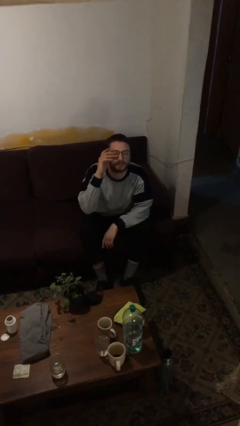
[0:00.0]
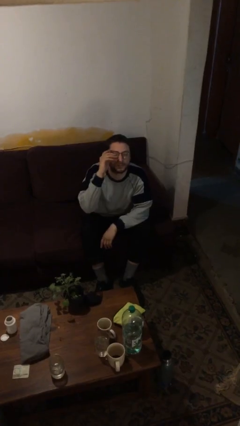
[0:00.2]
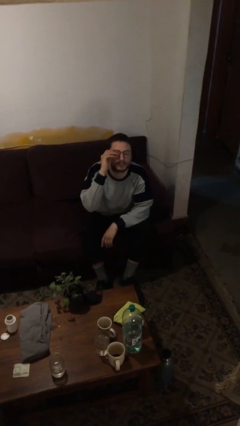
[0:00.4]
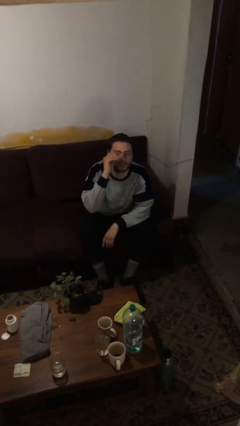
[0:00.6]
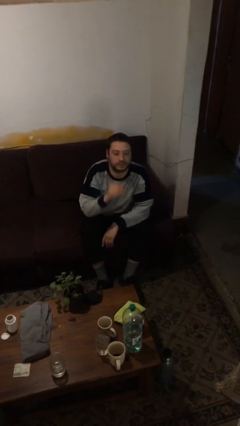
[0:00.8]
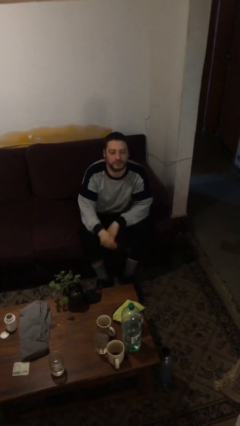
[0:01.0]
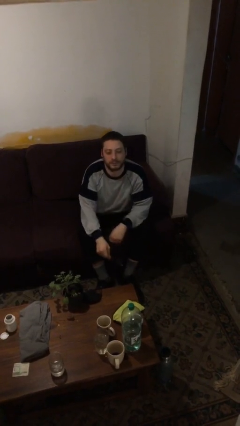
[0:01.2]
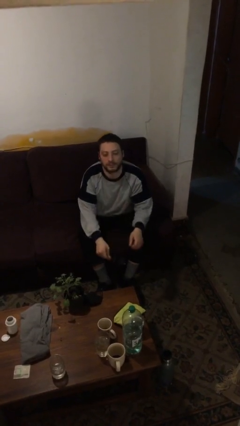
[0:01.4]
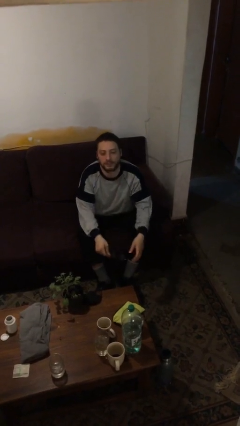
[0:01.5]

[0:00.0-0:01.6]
person takes off glasses

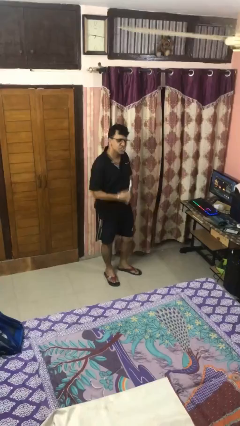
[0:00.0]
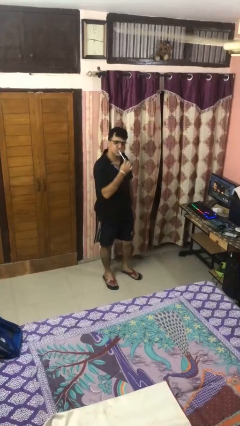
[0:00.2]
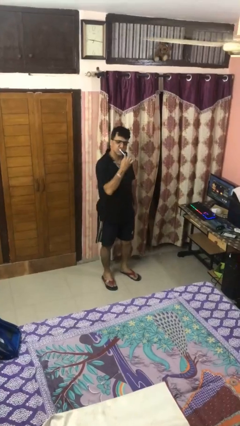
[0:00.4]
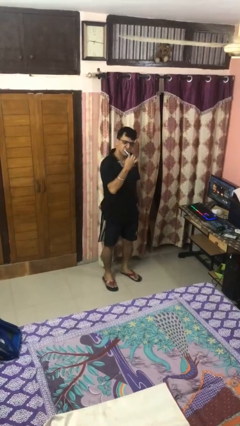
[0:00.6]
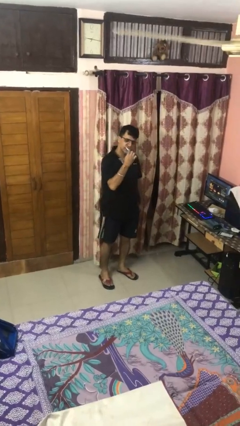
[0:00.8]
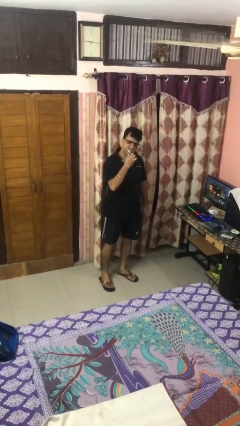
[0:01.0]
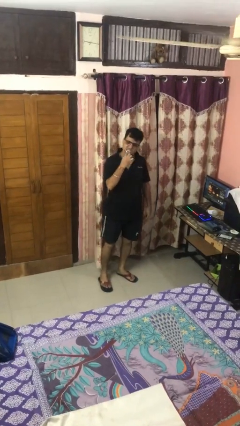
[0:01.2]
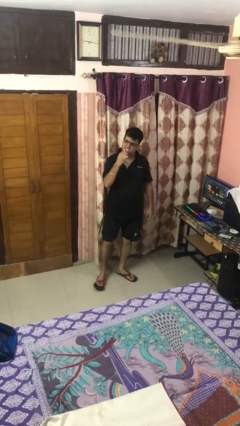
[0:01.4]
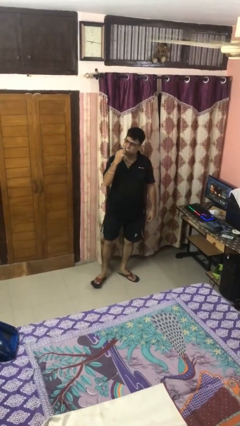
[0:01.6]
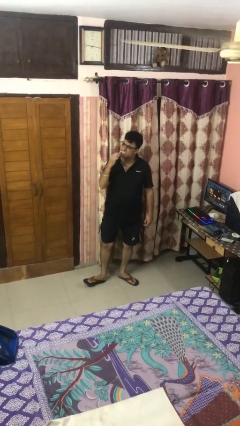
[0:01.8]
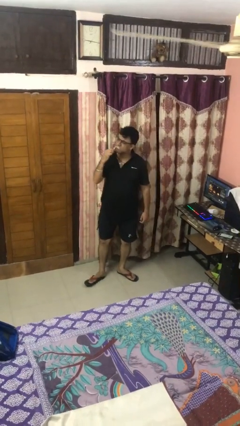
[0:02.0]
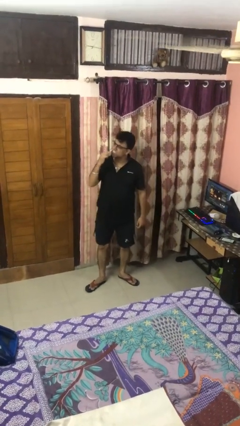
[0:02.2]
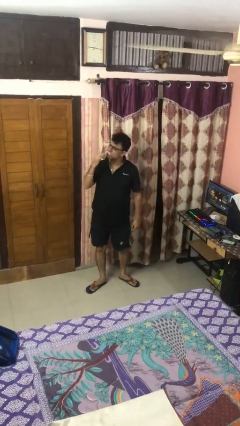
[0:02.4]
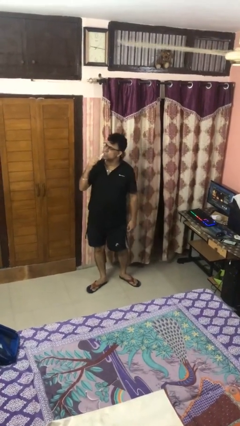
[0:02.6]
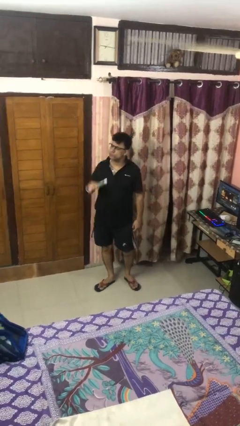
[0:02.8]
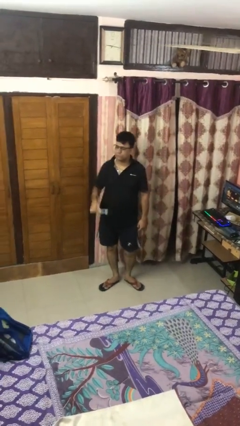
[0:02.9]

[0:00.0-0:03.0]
person brushes teeth

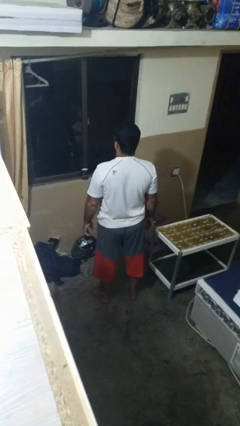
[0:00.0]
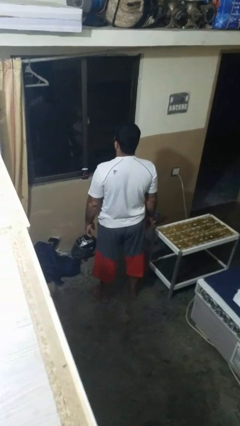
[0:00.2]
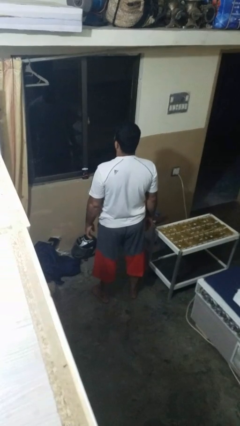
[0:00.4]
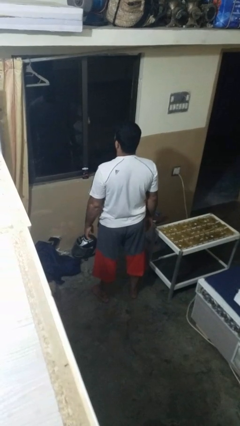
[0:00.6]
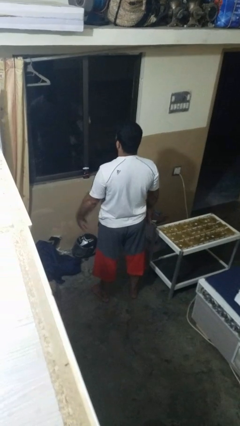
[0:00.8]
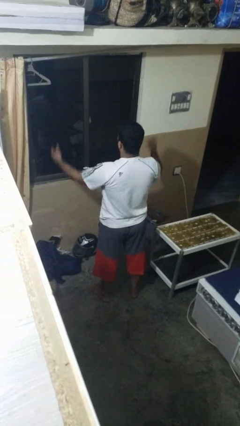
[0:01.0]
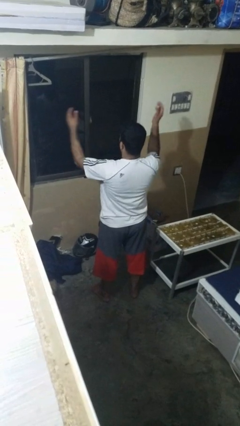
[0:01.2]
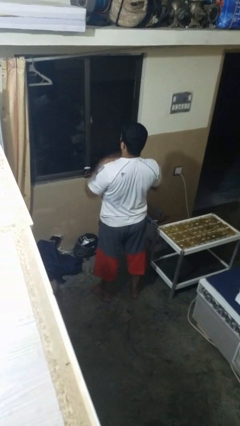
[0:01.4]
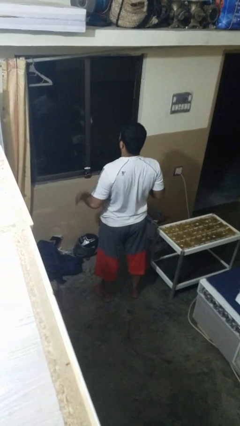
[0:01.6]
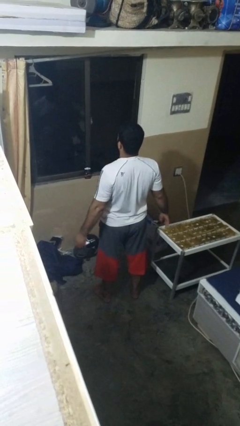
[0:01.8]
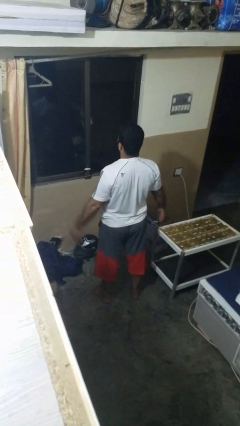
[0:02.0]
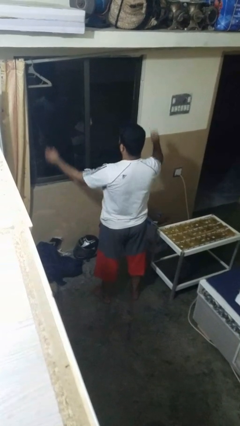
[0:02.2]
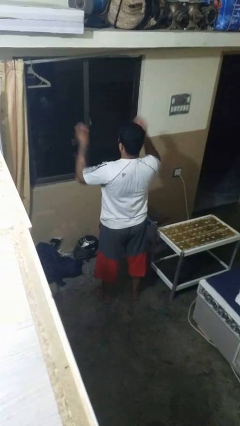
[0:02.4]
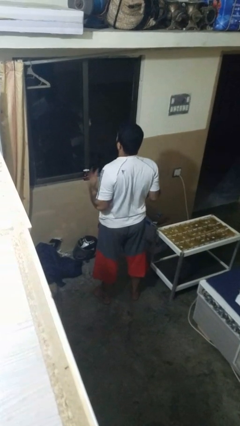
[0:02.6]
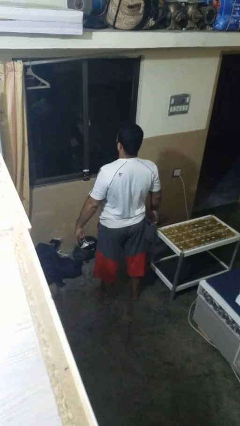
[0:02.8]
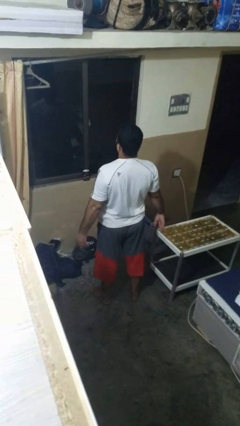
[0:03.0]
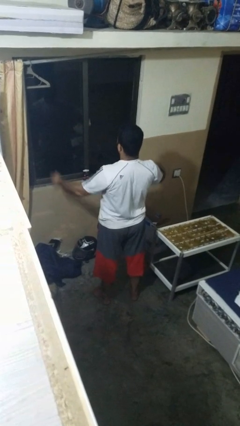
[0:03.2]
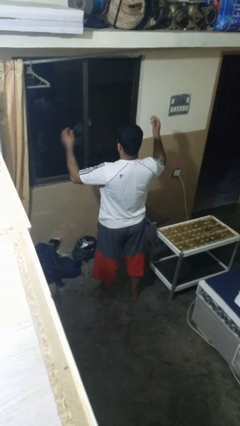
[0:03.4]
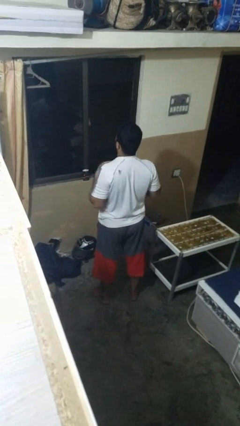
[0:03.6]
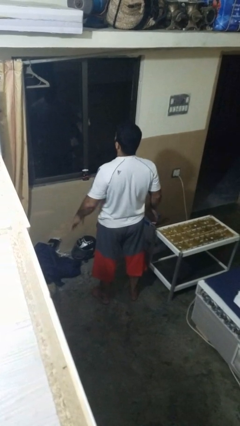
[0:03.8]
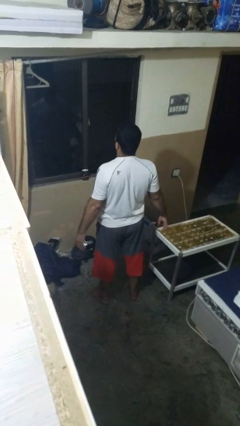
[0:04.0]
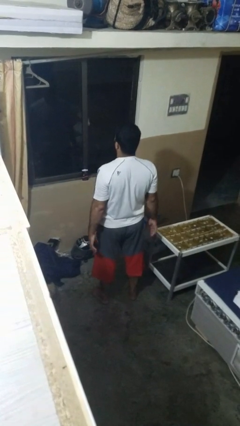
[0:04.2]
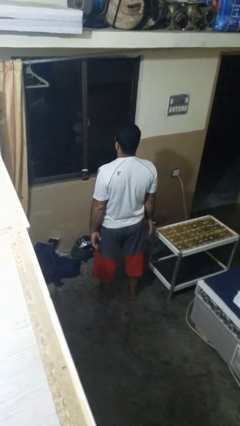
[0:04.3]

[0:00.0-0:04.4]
person drums on chest

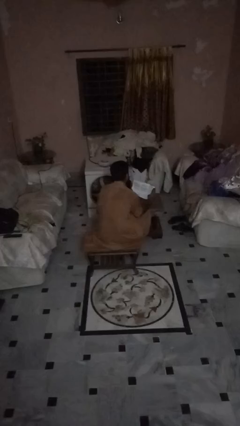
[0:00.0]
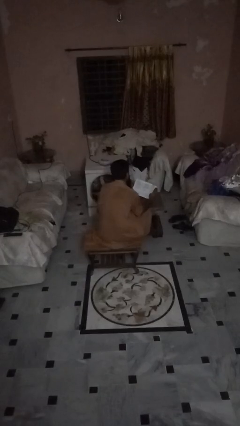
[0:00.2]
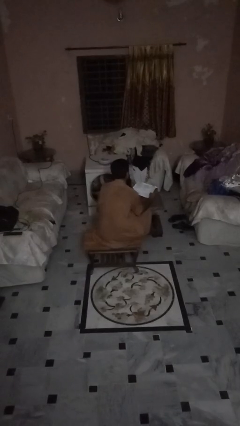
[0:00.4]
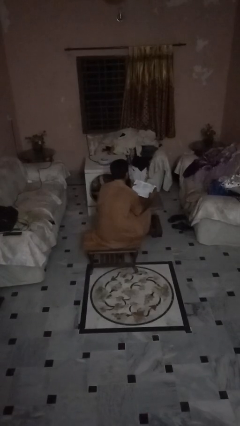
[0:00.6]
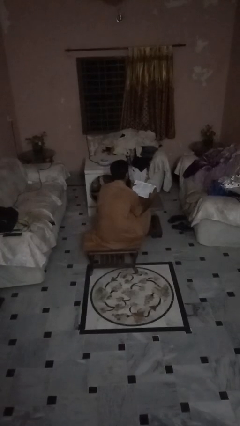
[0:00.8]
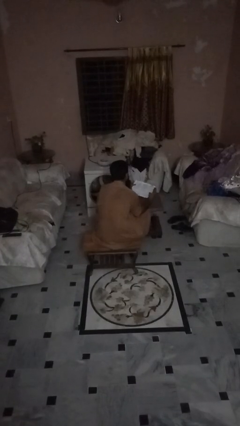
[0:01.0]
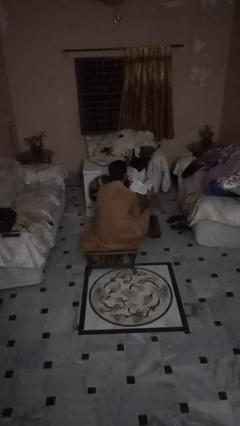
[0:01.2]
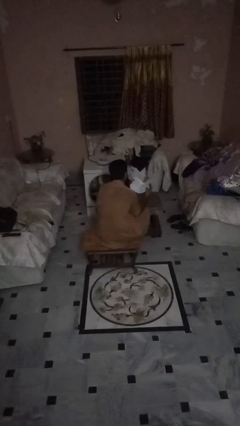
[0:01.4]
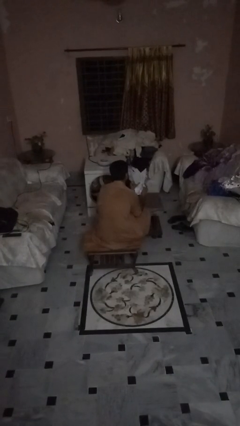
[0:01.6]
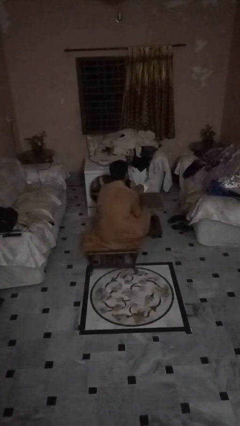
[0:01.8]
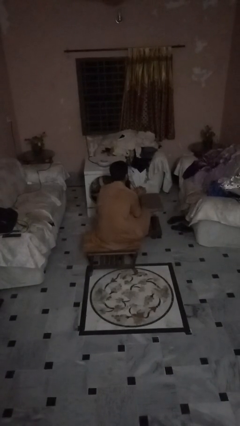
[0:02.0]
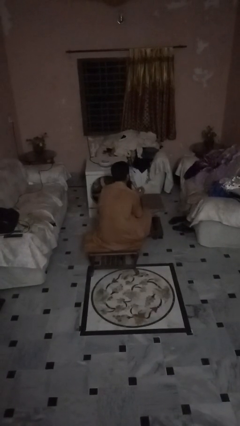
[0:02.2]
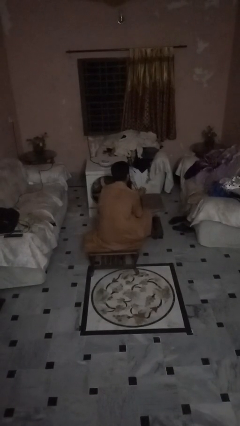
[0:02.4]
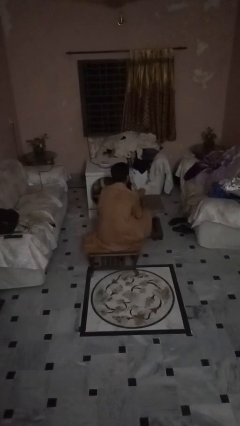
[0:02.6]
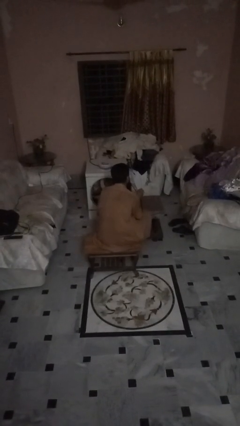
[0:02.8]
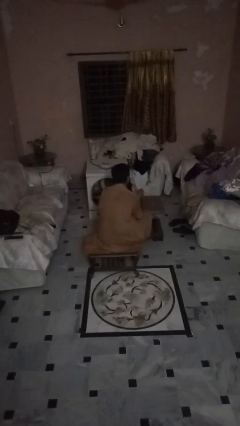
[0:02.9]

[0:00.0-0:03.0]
person crumples paper

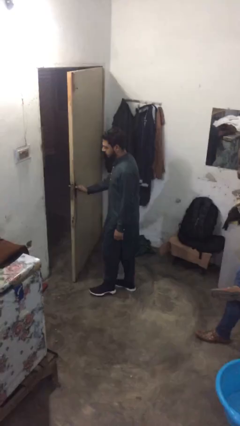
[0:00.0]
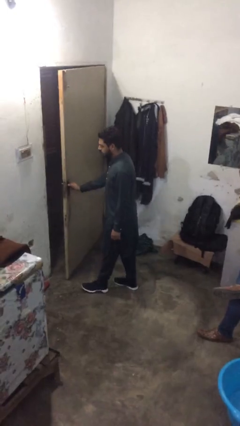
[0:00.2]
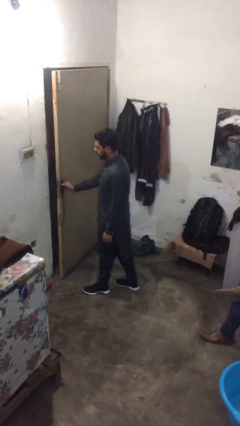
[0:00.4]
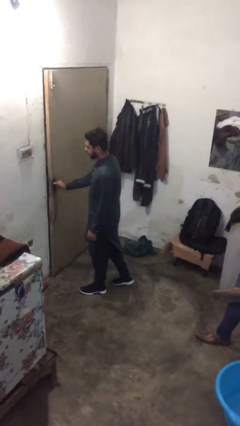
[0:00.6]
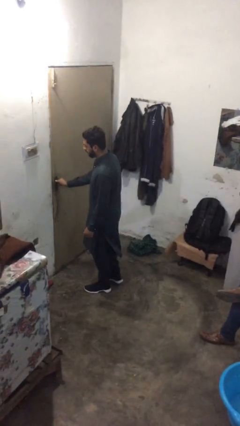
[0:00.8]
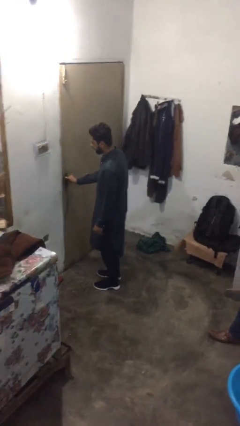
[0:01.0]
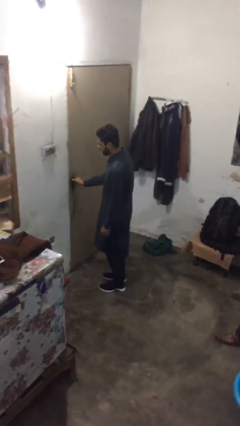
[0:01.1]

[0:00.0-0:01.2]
person closes facility door

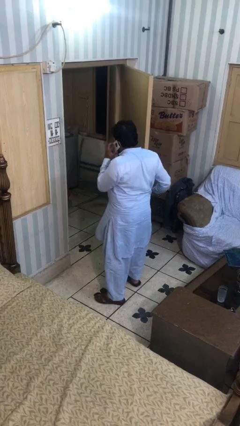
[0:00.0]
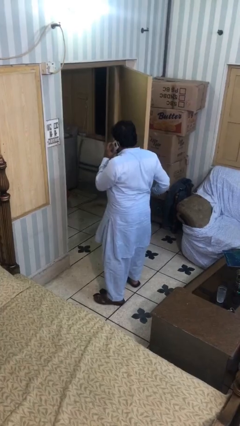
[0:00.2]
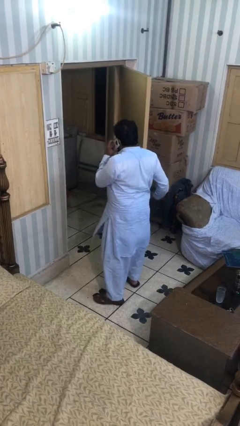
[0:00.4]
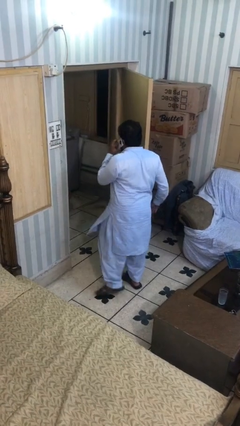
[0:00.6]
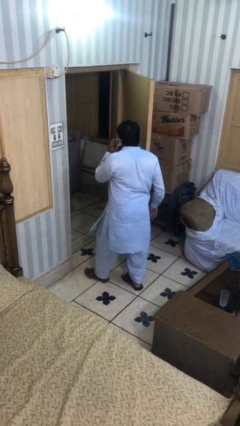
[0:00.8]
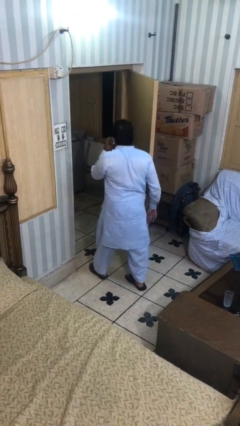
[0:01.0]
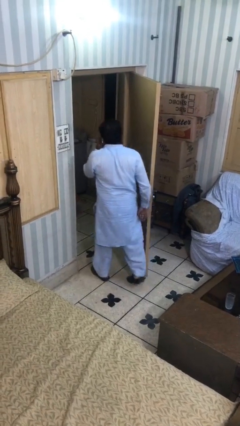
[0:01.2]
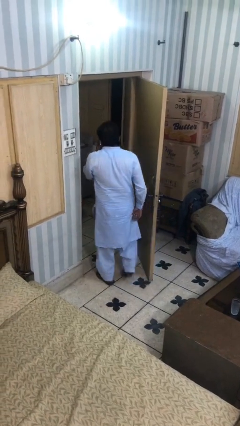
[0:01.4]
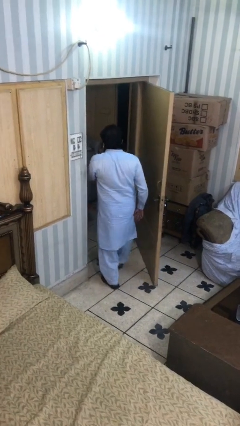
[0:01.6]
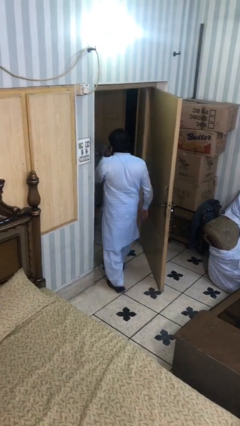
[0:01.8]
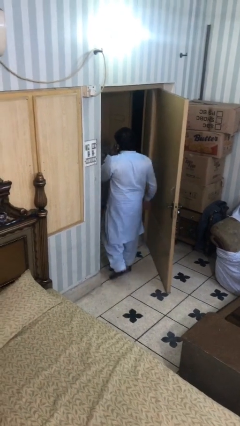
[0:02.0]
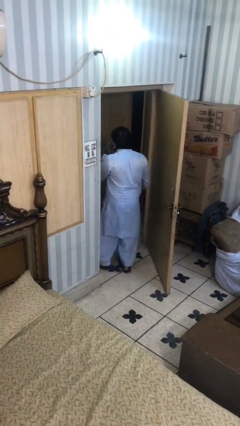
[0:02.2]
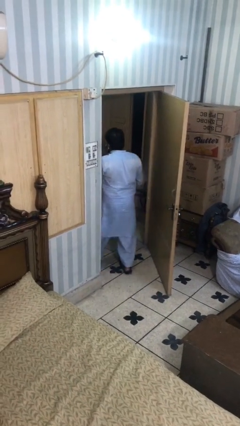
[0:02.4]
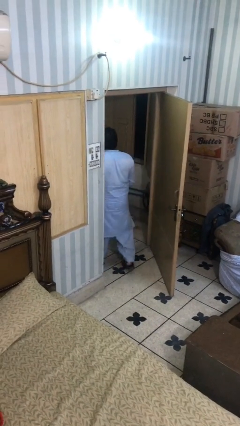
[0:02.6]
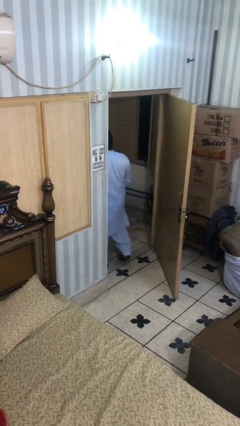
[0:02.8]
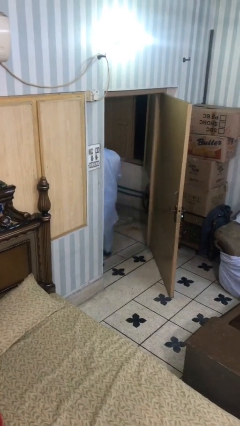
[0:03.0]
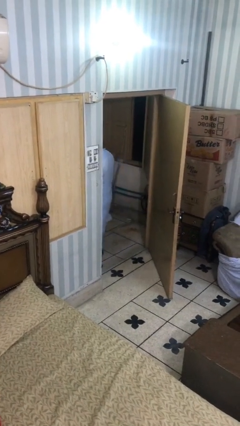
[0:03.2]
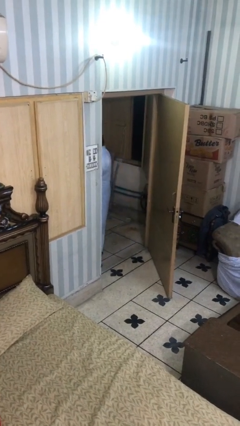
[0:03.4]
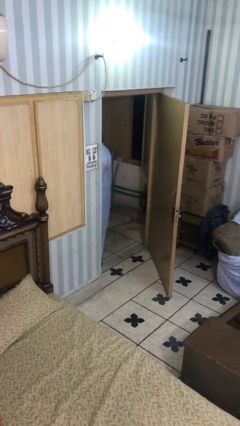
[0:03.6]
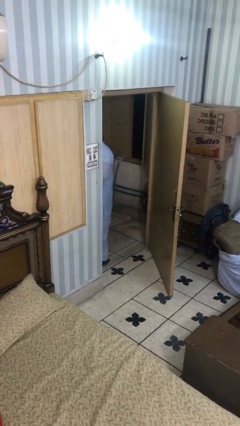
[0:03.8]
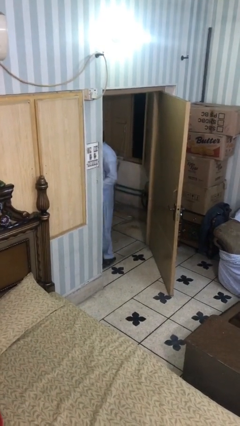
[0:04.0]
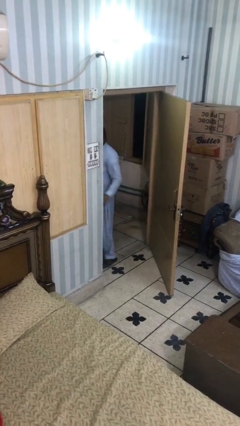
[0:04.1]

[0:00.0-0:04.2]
person exits scene through structure
